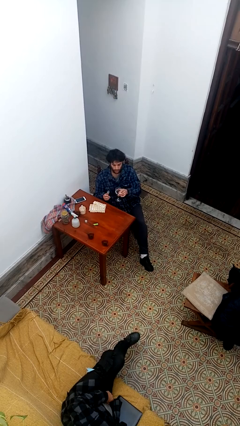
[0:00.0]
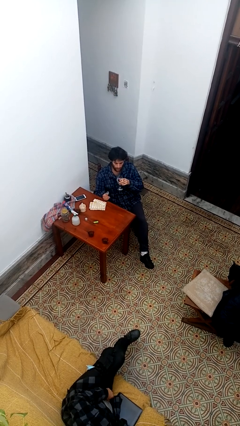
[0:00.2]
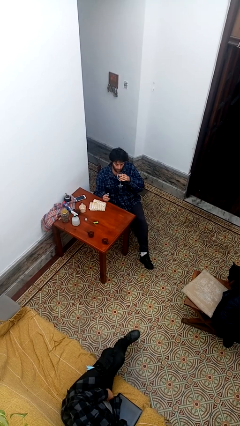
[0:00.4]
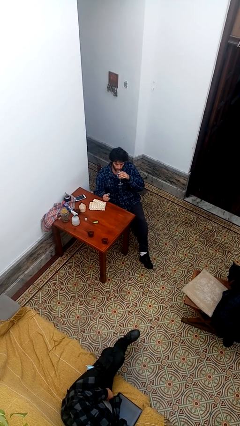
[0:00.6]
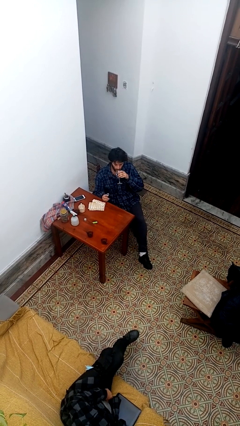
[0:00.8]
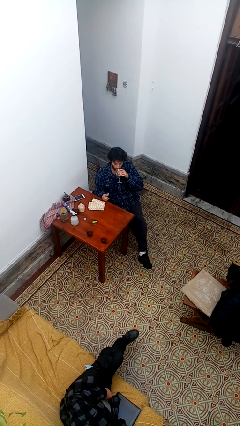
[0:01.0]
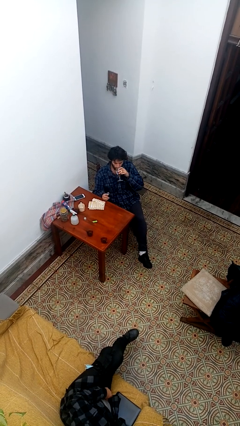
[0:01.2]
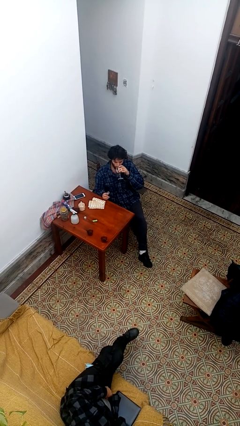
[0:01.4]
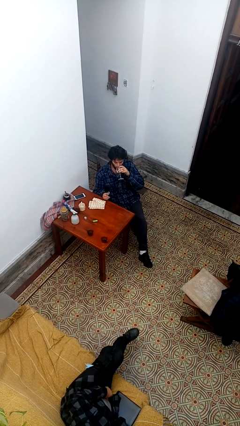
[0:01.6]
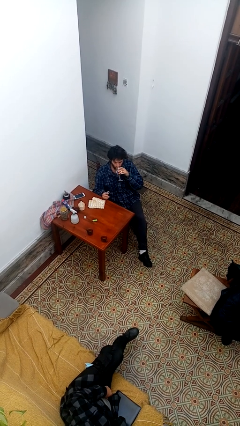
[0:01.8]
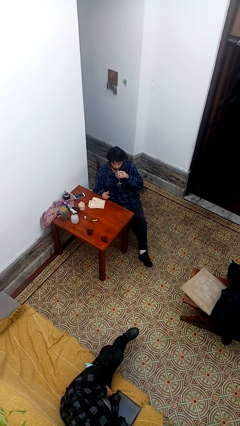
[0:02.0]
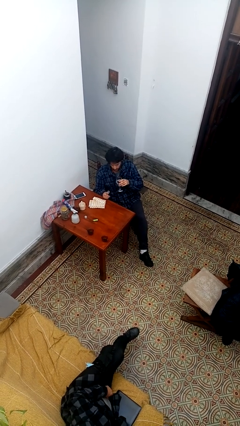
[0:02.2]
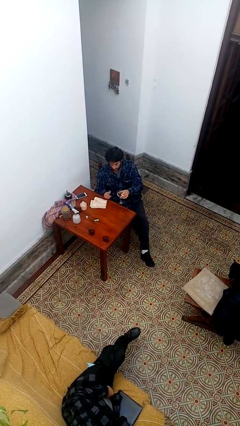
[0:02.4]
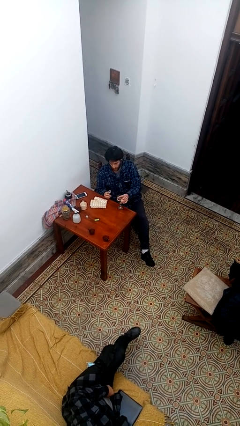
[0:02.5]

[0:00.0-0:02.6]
person drinks from cup

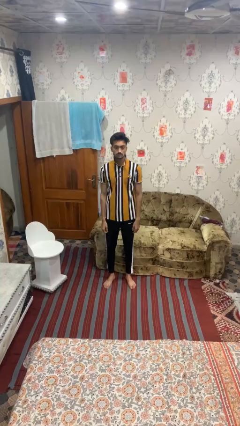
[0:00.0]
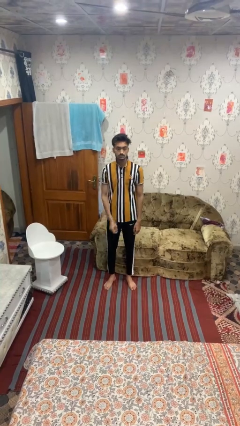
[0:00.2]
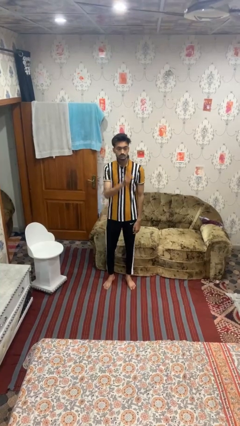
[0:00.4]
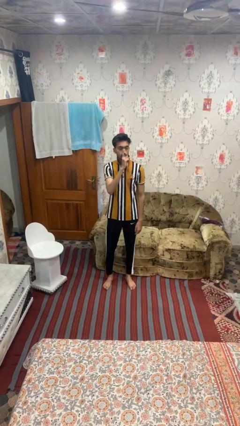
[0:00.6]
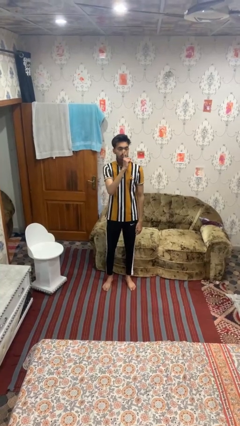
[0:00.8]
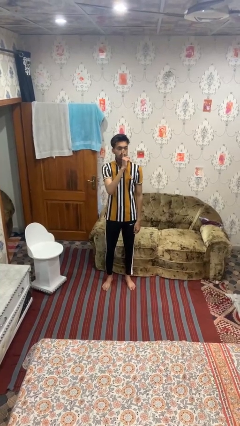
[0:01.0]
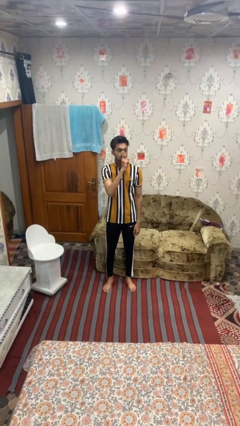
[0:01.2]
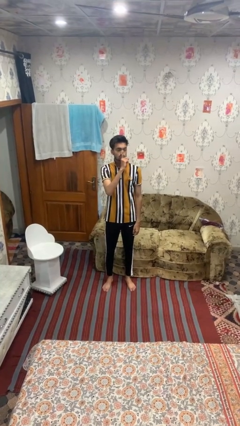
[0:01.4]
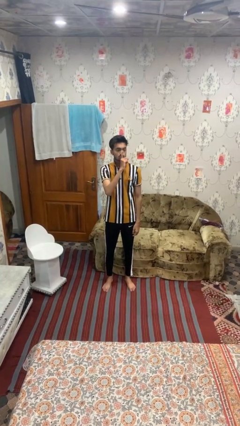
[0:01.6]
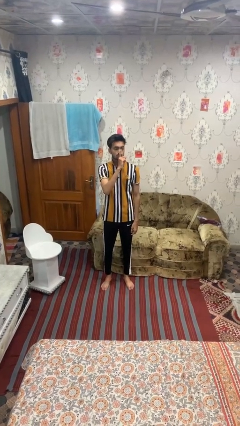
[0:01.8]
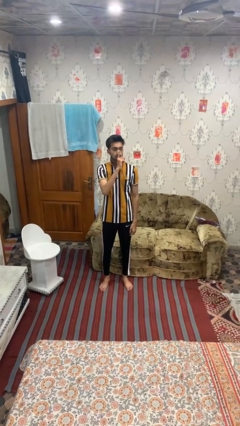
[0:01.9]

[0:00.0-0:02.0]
person gestures be quiet

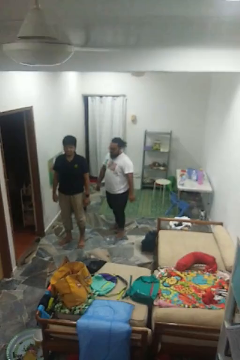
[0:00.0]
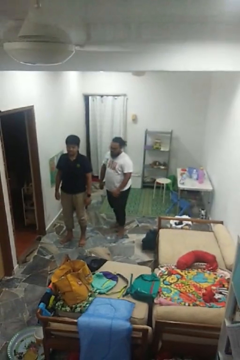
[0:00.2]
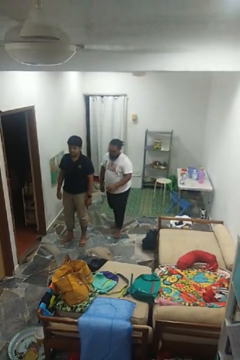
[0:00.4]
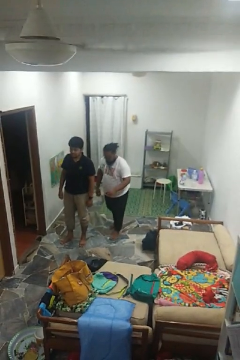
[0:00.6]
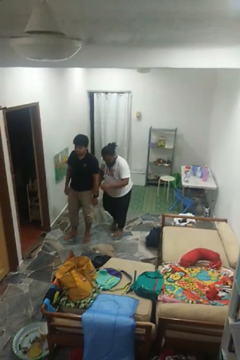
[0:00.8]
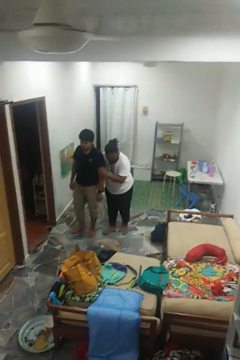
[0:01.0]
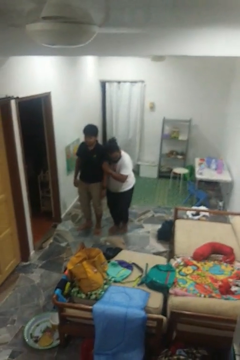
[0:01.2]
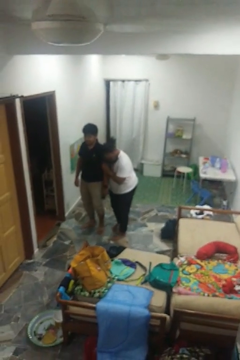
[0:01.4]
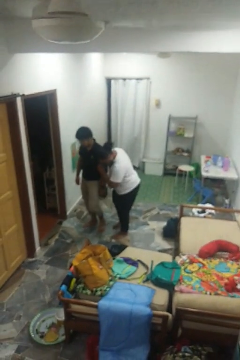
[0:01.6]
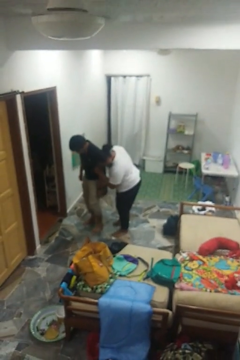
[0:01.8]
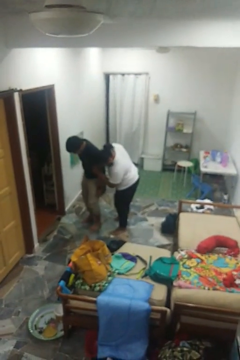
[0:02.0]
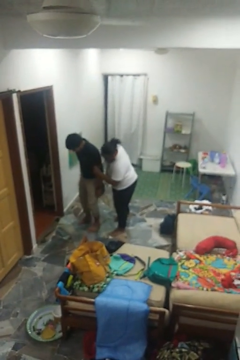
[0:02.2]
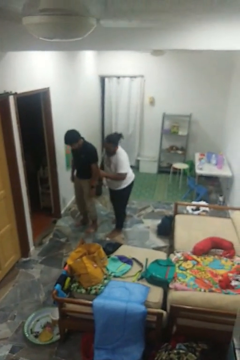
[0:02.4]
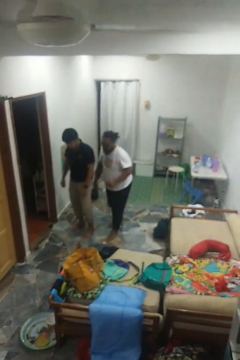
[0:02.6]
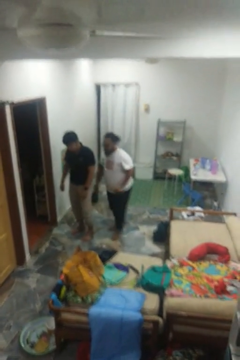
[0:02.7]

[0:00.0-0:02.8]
person bumps into person

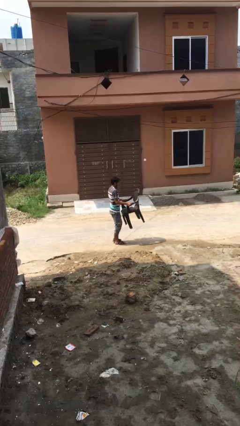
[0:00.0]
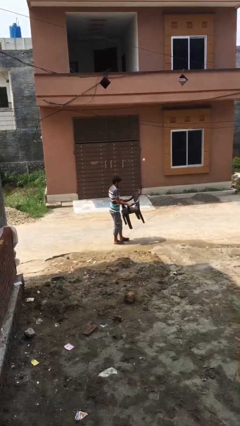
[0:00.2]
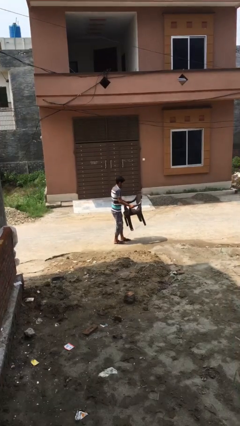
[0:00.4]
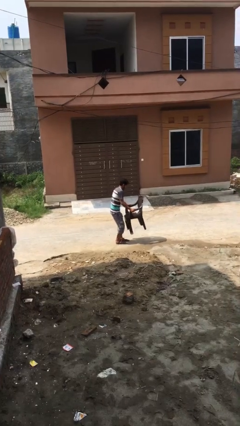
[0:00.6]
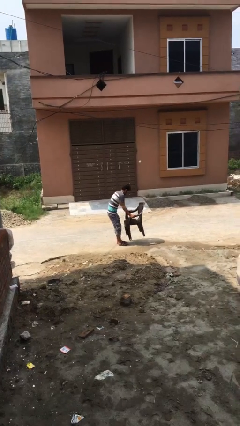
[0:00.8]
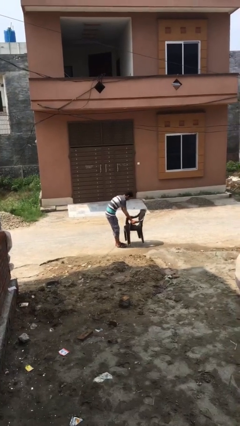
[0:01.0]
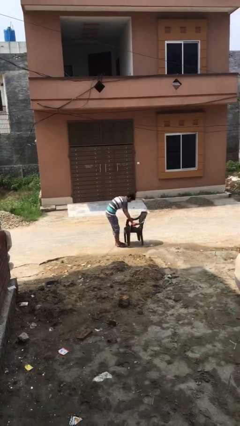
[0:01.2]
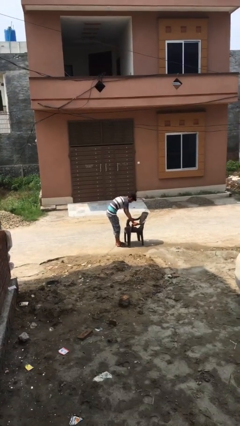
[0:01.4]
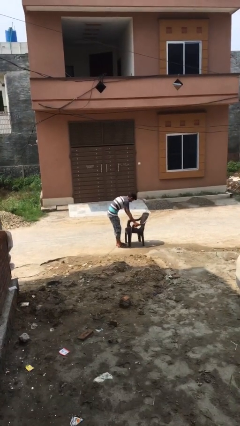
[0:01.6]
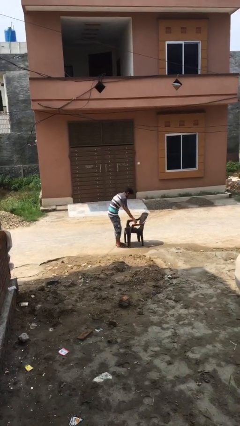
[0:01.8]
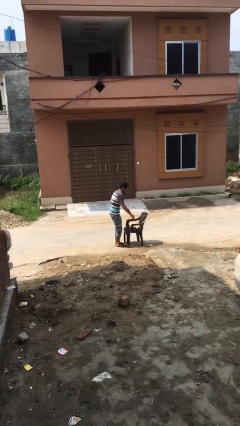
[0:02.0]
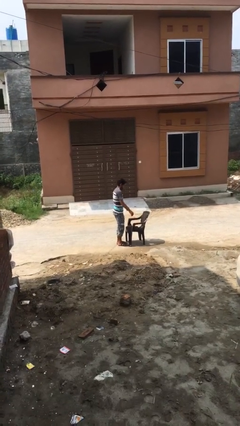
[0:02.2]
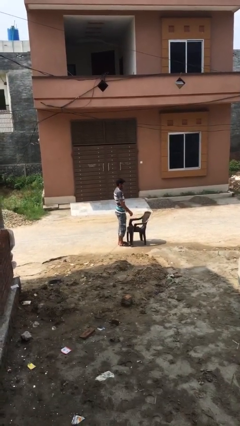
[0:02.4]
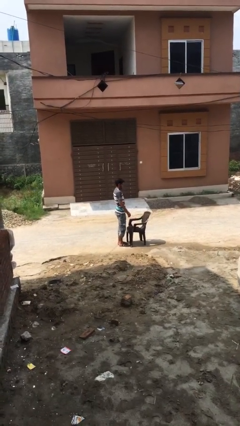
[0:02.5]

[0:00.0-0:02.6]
person puts down object on floor

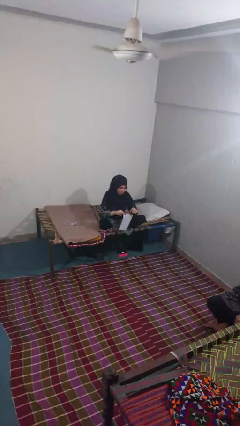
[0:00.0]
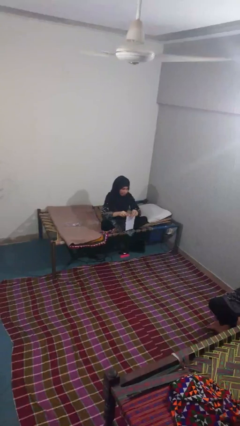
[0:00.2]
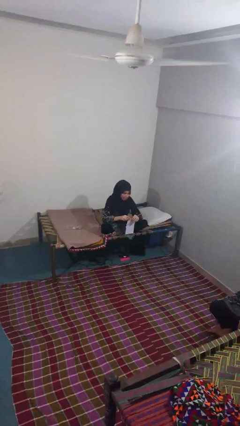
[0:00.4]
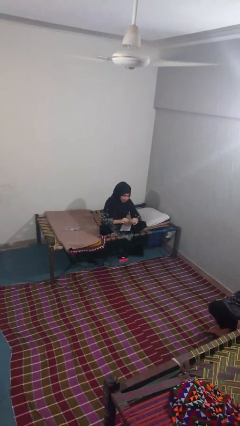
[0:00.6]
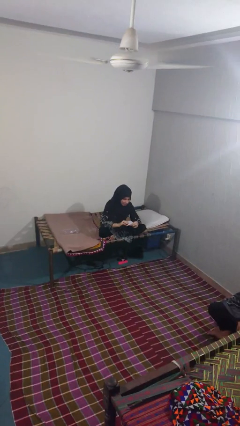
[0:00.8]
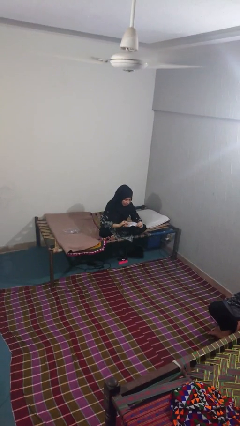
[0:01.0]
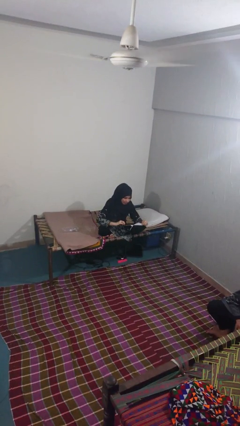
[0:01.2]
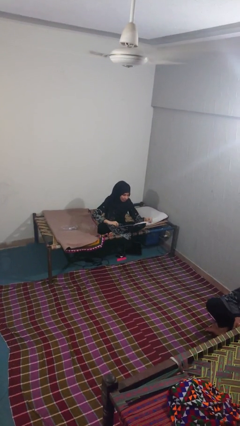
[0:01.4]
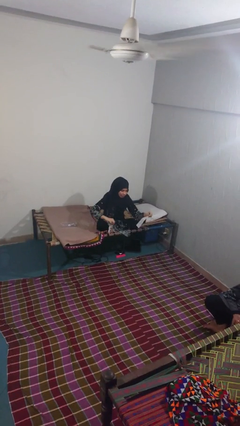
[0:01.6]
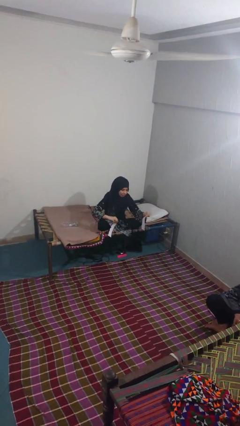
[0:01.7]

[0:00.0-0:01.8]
person tears paper

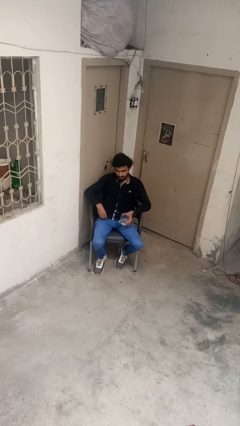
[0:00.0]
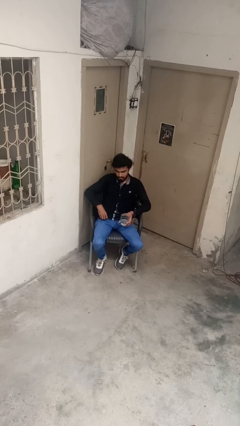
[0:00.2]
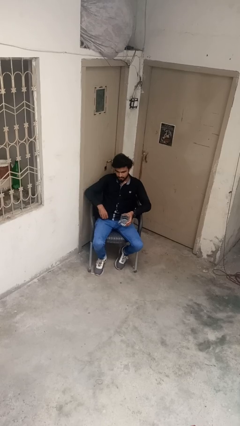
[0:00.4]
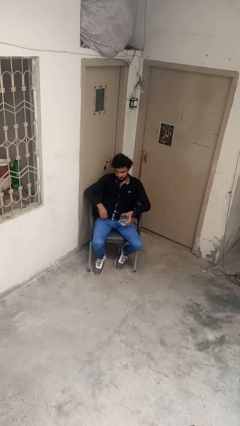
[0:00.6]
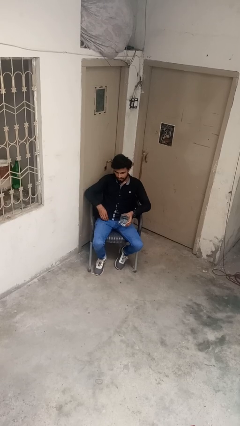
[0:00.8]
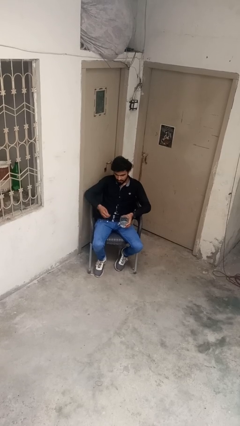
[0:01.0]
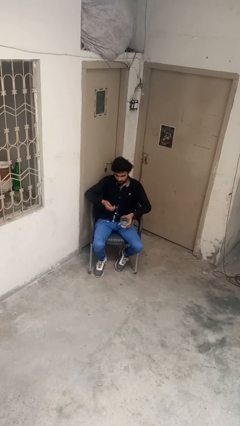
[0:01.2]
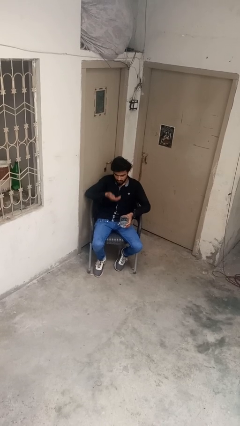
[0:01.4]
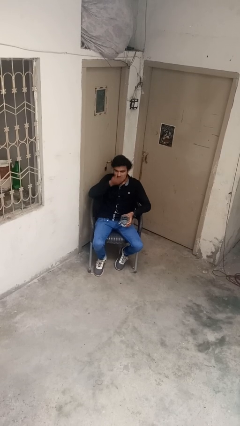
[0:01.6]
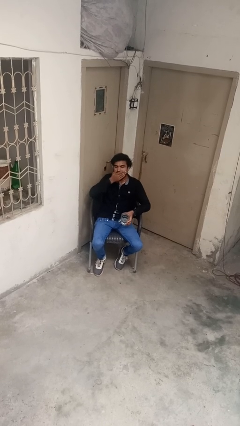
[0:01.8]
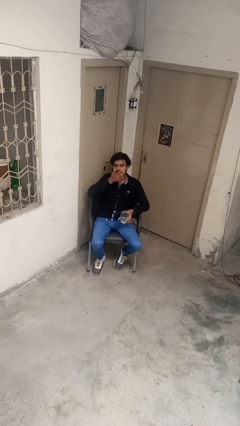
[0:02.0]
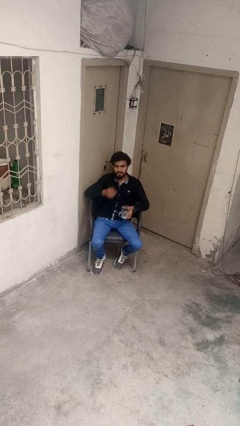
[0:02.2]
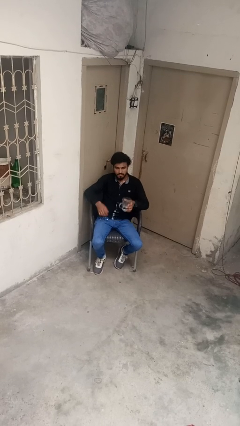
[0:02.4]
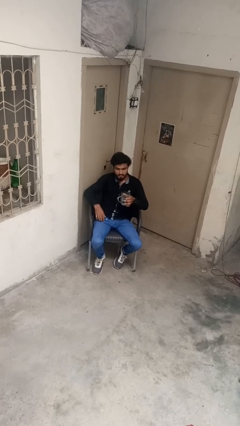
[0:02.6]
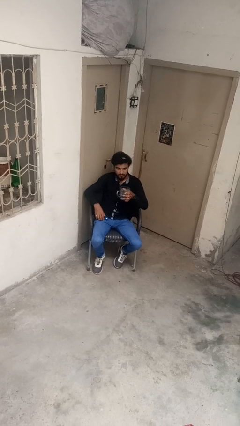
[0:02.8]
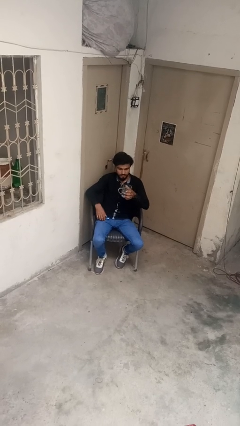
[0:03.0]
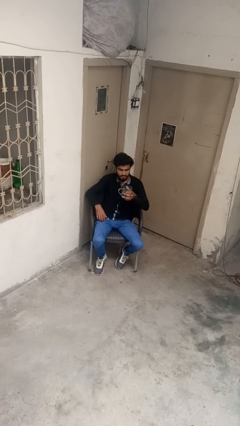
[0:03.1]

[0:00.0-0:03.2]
person takes medicine pills

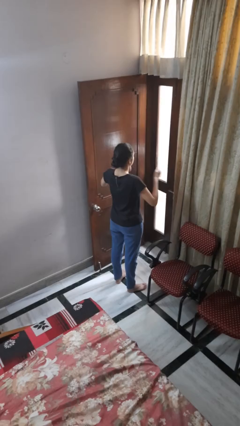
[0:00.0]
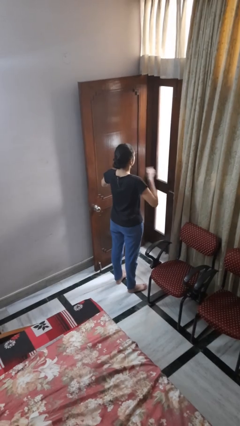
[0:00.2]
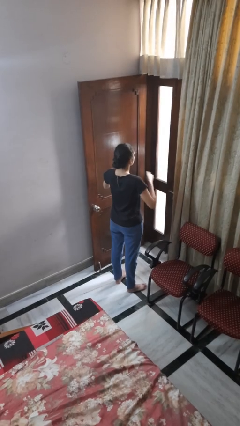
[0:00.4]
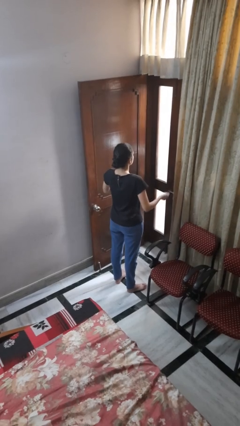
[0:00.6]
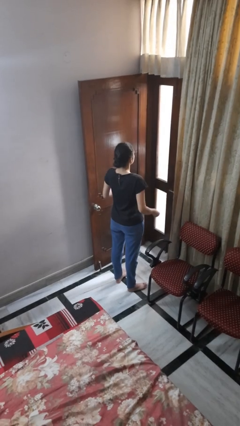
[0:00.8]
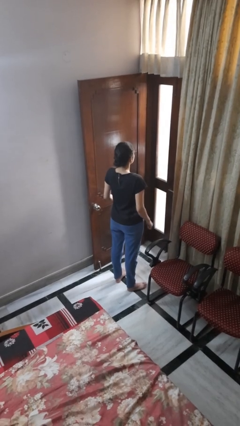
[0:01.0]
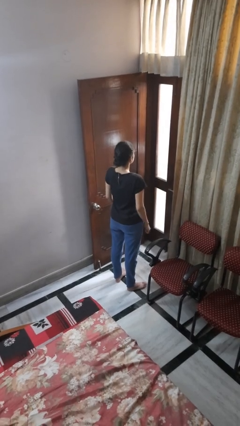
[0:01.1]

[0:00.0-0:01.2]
person drums on chest

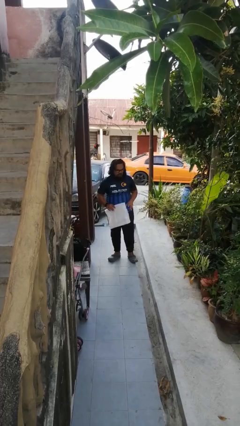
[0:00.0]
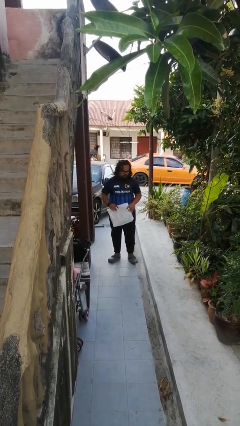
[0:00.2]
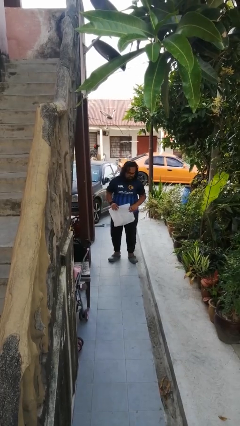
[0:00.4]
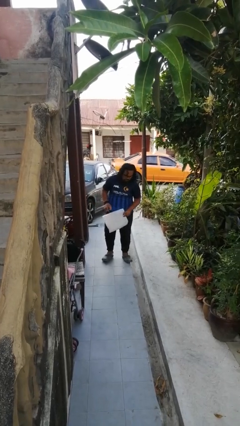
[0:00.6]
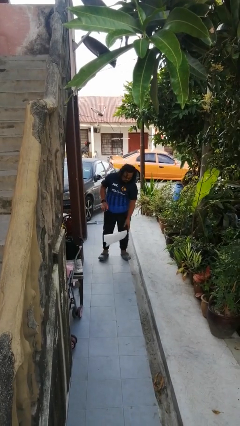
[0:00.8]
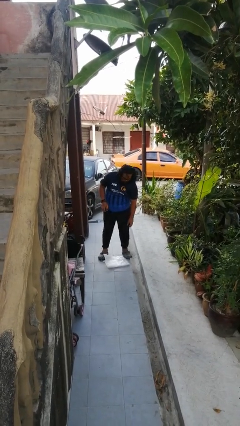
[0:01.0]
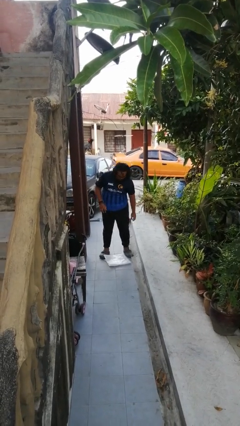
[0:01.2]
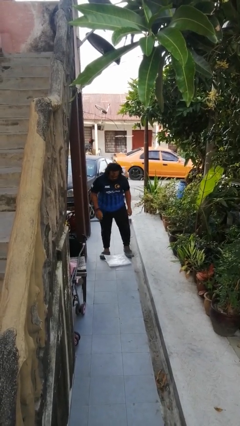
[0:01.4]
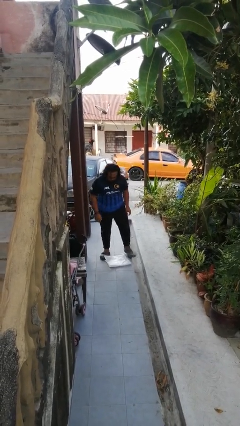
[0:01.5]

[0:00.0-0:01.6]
person drops object
